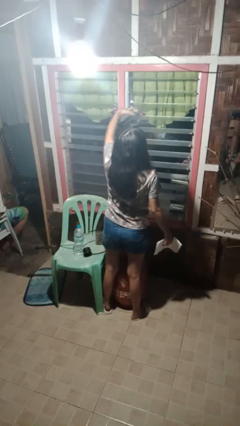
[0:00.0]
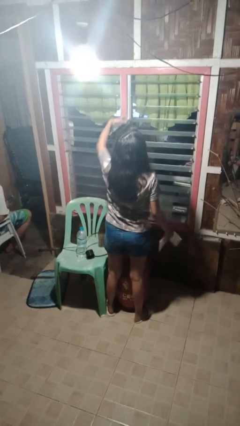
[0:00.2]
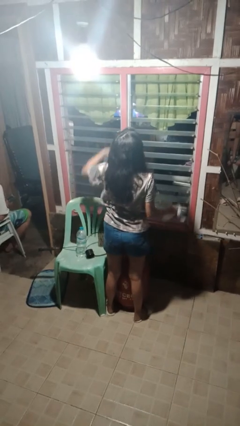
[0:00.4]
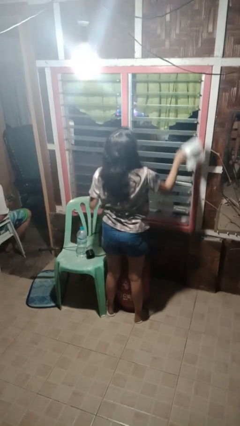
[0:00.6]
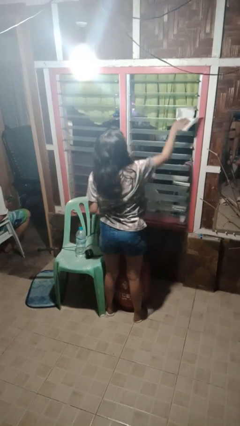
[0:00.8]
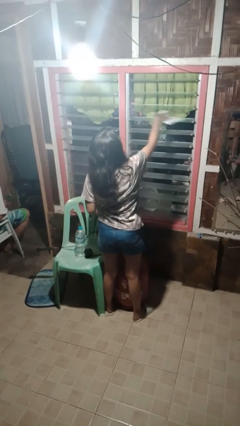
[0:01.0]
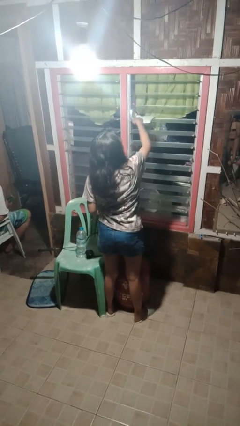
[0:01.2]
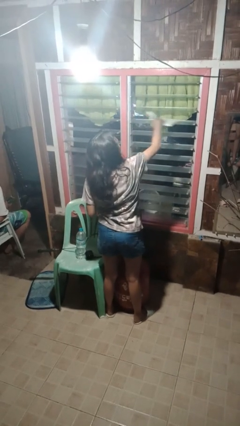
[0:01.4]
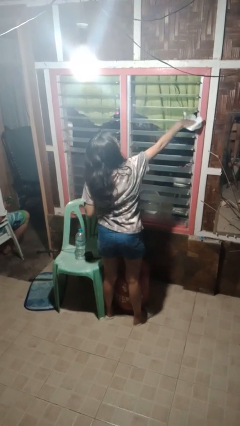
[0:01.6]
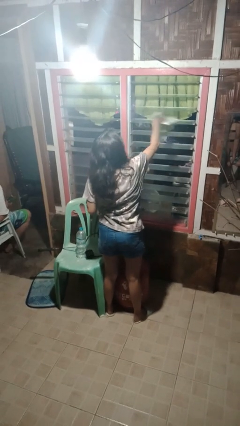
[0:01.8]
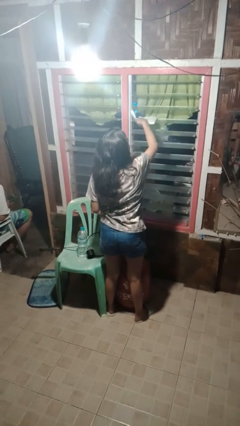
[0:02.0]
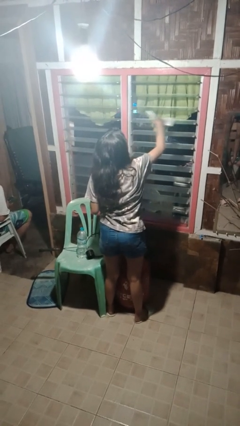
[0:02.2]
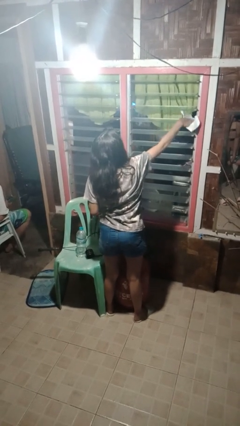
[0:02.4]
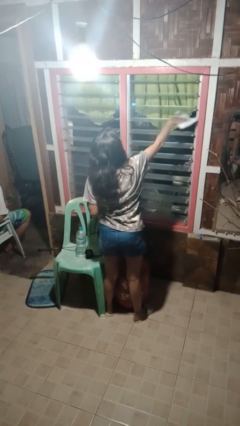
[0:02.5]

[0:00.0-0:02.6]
person washes window

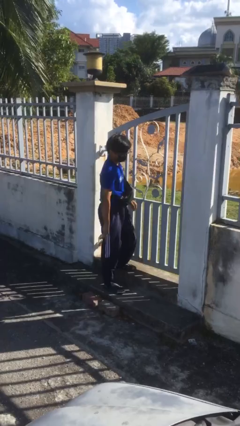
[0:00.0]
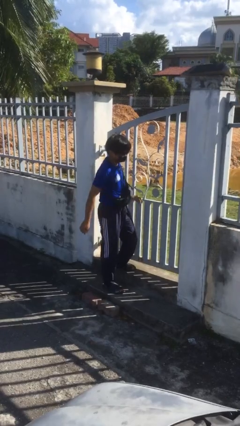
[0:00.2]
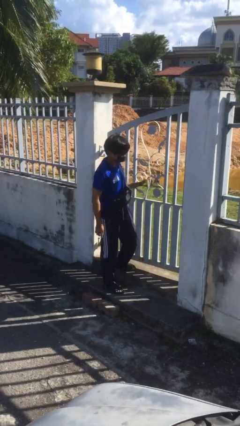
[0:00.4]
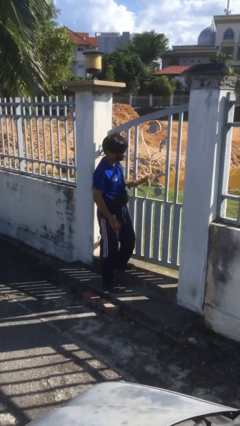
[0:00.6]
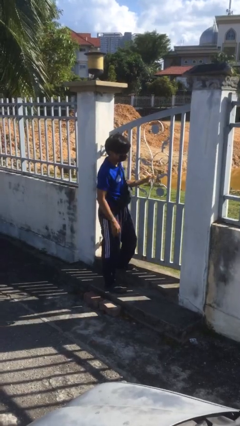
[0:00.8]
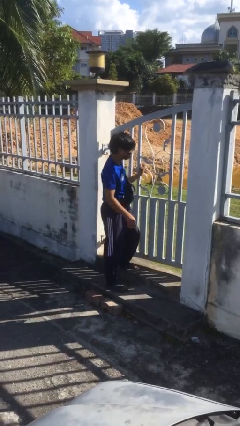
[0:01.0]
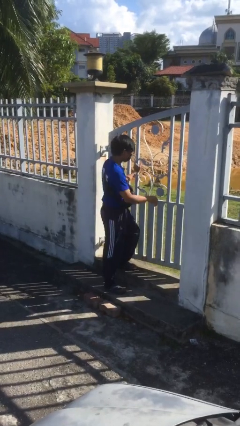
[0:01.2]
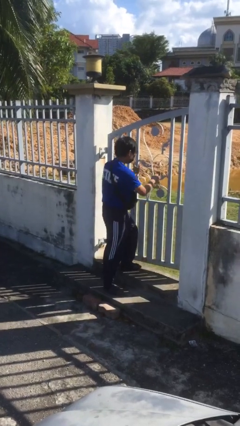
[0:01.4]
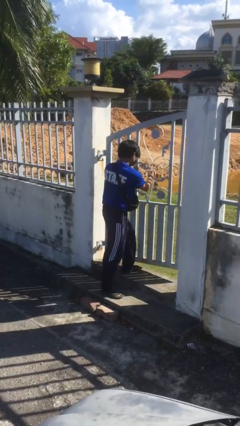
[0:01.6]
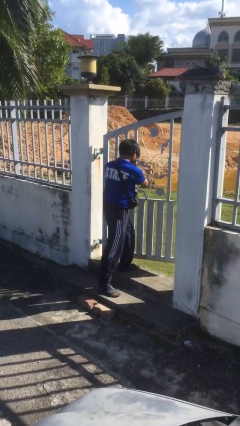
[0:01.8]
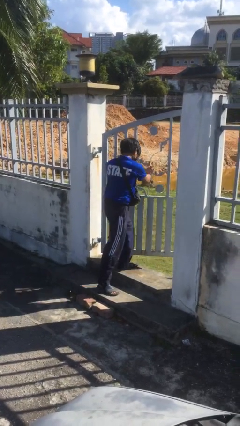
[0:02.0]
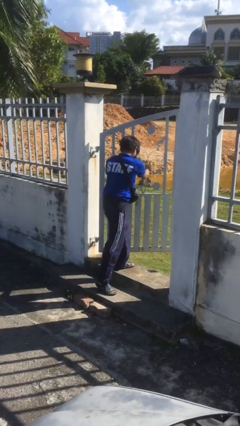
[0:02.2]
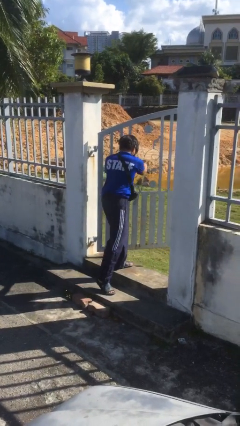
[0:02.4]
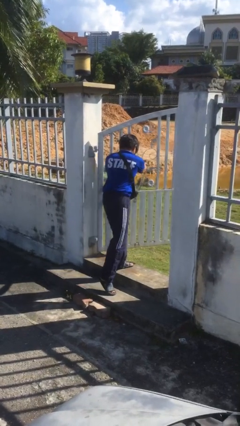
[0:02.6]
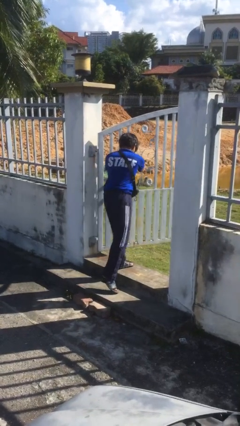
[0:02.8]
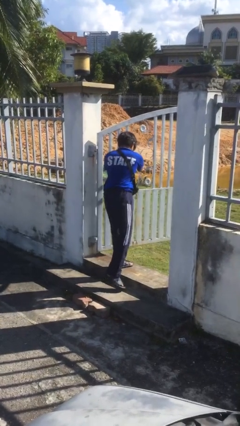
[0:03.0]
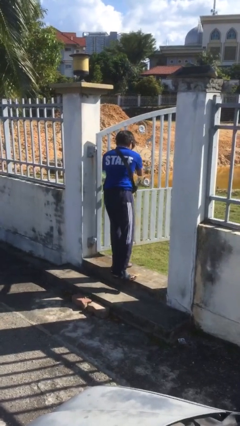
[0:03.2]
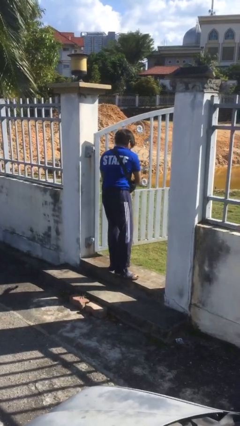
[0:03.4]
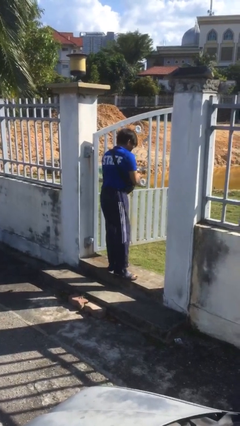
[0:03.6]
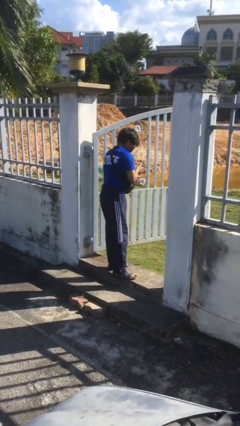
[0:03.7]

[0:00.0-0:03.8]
person opens facility door

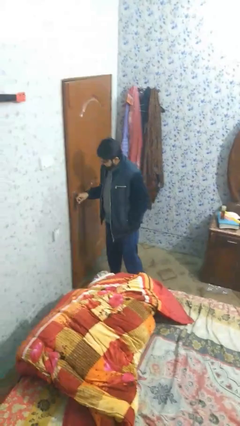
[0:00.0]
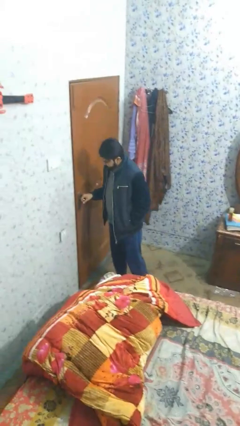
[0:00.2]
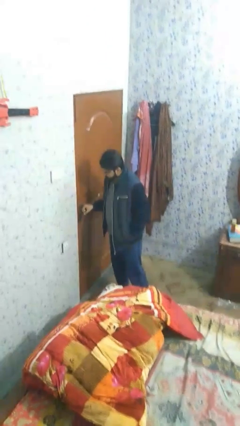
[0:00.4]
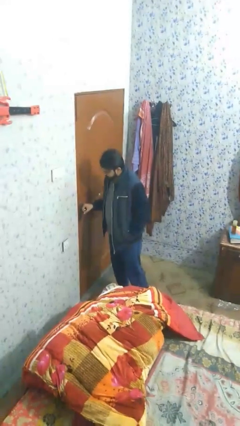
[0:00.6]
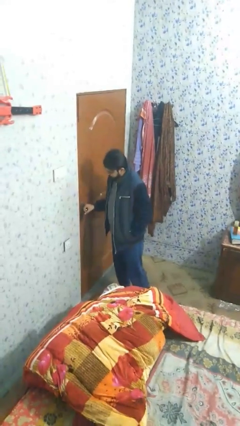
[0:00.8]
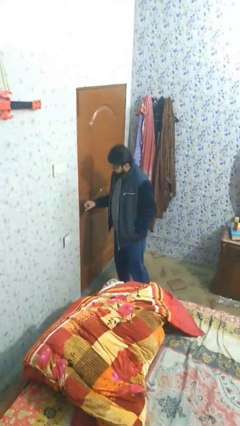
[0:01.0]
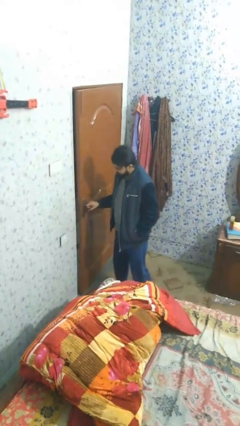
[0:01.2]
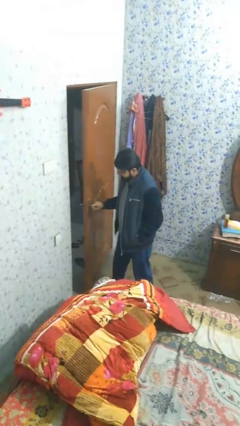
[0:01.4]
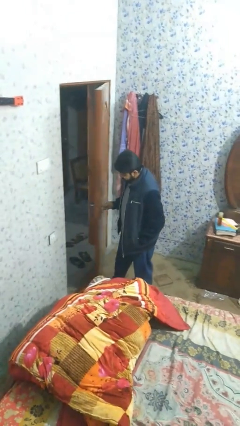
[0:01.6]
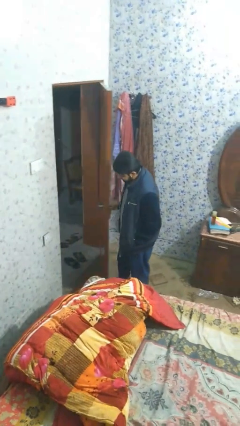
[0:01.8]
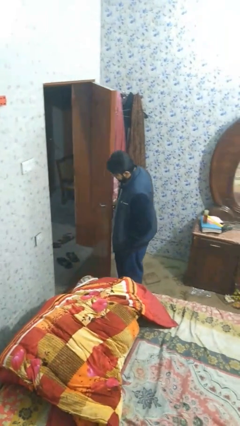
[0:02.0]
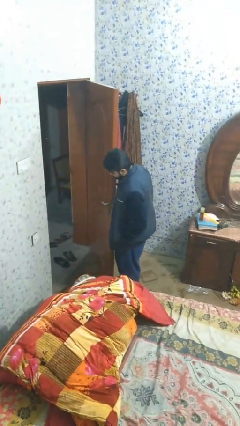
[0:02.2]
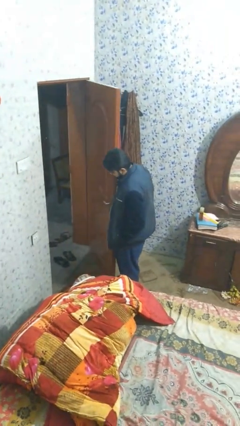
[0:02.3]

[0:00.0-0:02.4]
person closes facility door

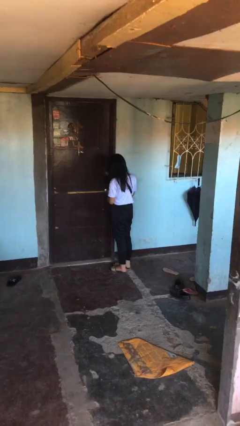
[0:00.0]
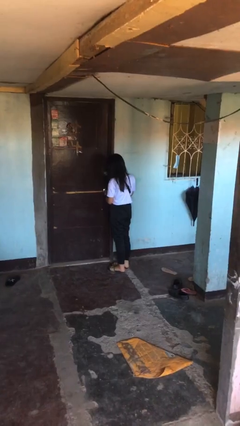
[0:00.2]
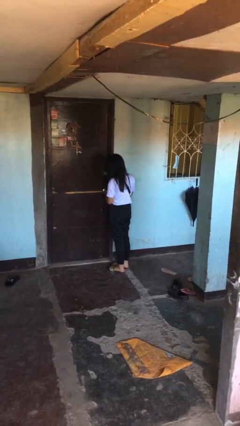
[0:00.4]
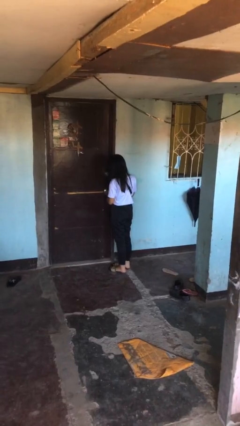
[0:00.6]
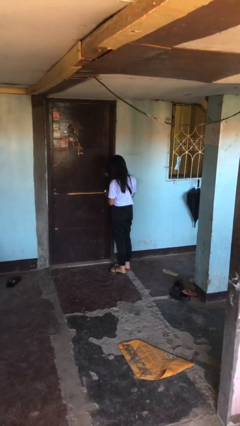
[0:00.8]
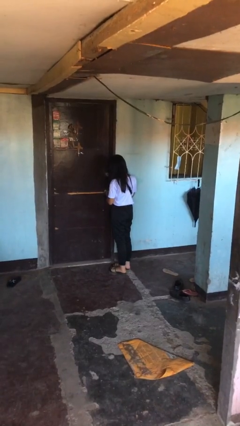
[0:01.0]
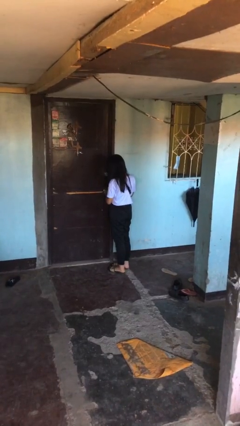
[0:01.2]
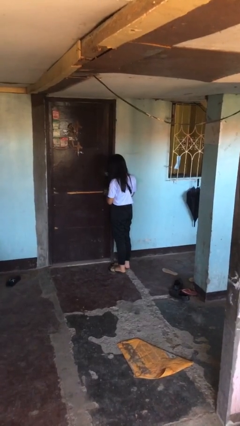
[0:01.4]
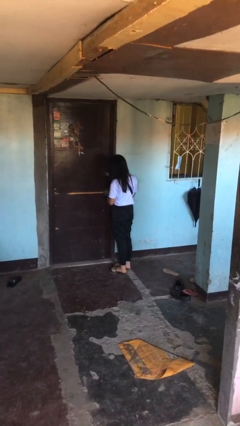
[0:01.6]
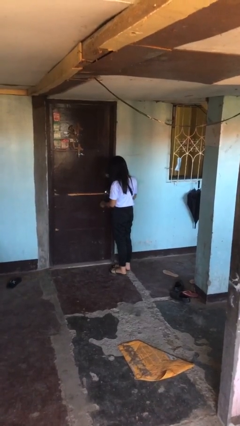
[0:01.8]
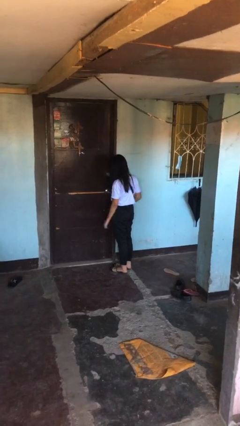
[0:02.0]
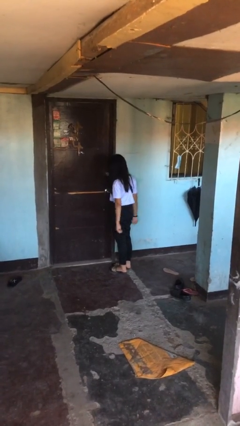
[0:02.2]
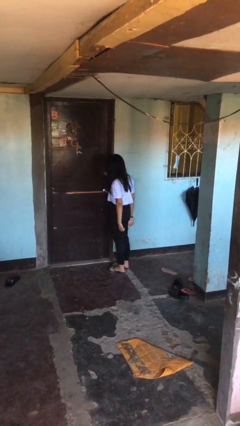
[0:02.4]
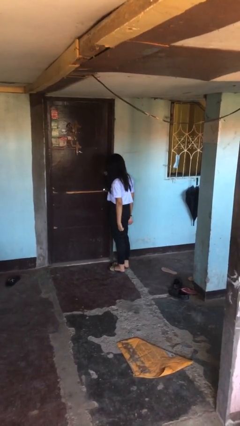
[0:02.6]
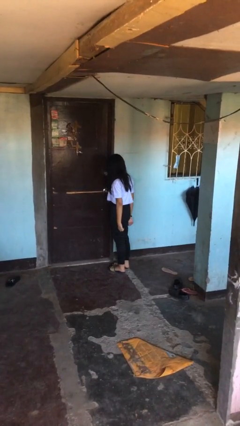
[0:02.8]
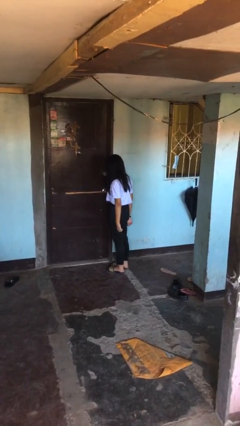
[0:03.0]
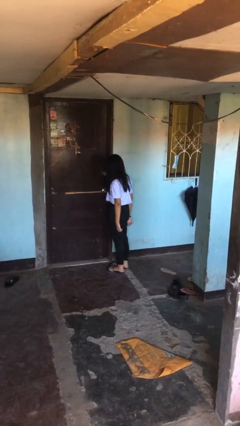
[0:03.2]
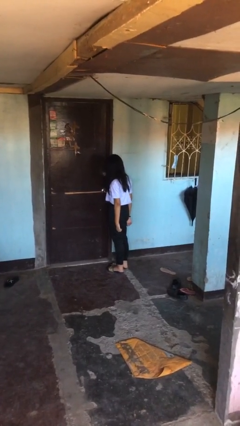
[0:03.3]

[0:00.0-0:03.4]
person locks door with keys

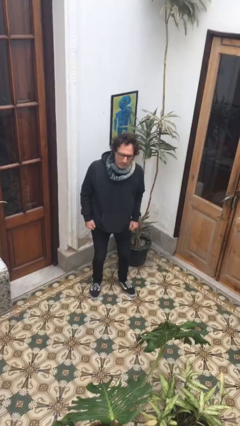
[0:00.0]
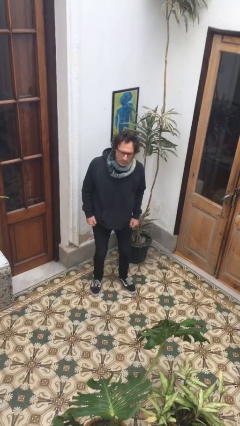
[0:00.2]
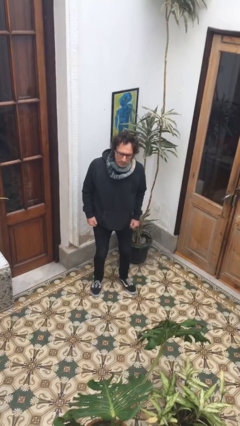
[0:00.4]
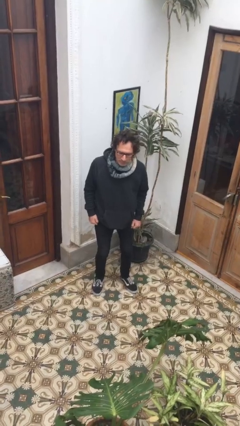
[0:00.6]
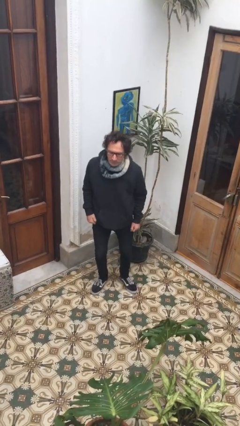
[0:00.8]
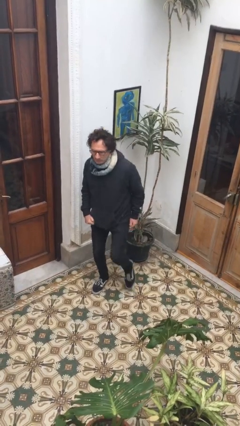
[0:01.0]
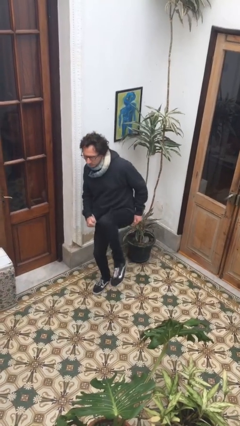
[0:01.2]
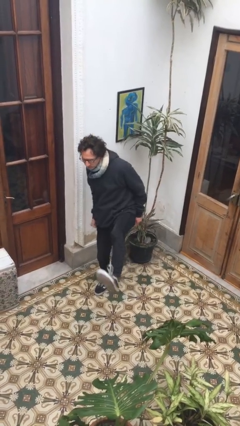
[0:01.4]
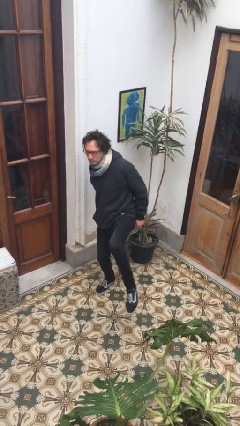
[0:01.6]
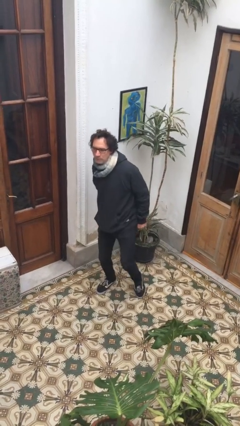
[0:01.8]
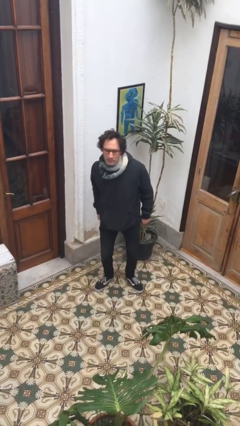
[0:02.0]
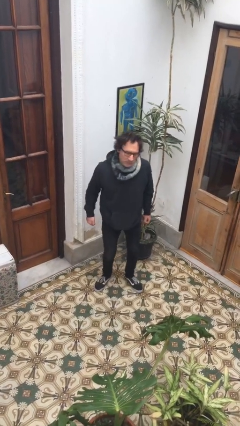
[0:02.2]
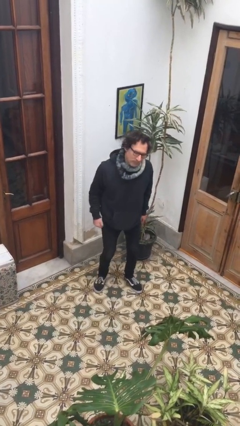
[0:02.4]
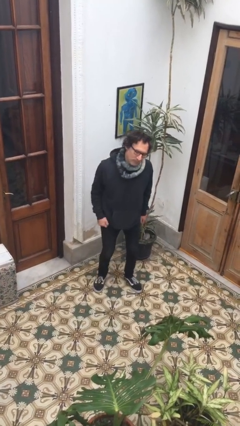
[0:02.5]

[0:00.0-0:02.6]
person karate kicks

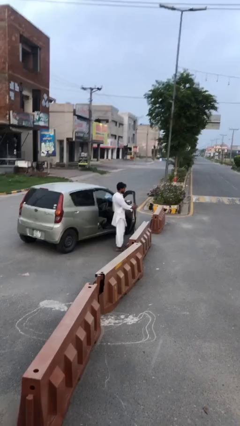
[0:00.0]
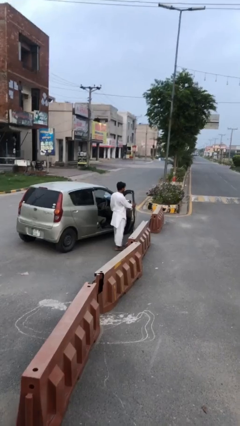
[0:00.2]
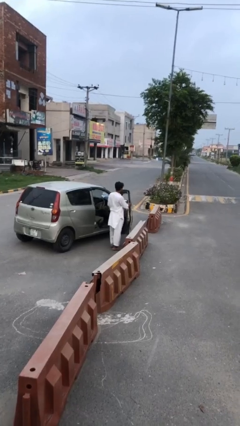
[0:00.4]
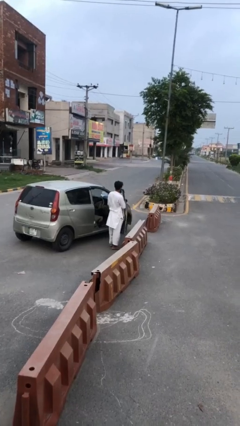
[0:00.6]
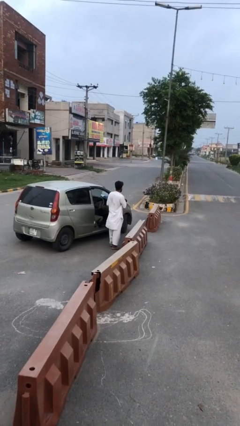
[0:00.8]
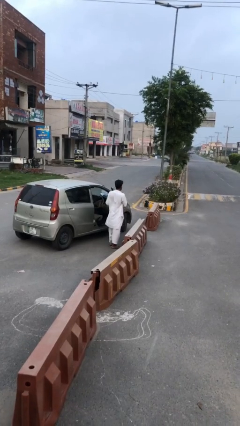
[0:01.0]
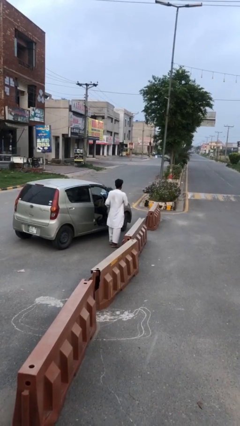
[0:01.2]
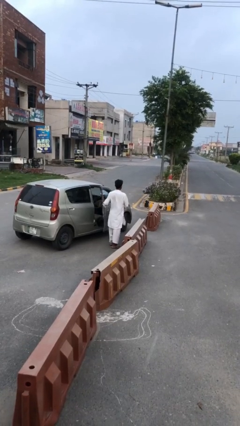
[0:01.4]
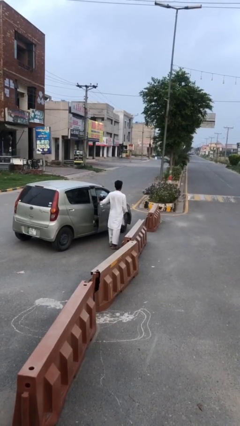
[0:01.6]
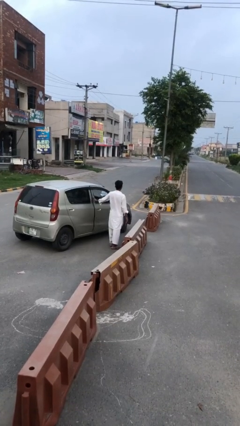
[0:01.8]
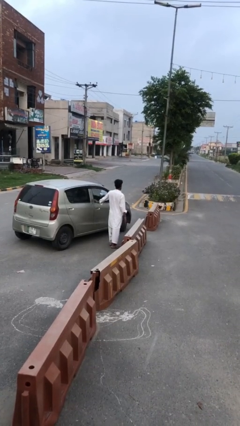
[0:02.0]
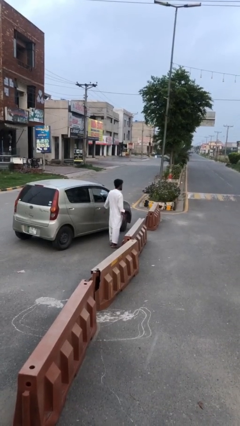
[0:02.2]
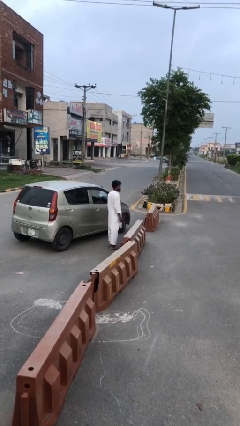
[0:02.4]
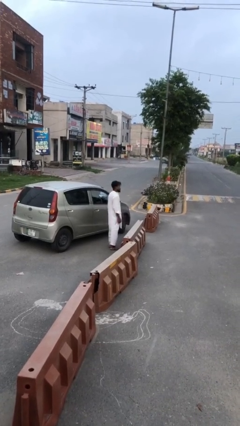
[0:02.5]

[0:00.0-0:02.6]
person closes car door
